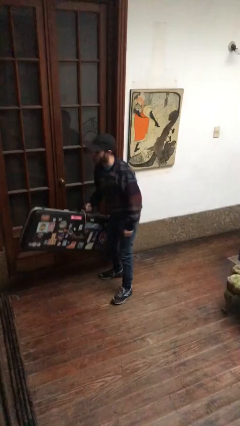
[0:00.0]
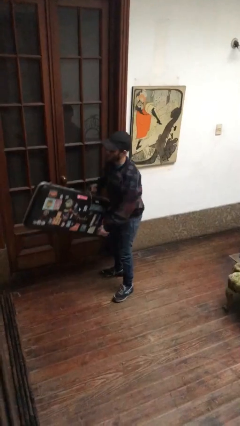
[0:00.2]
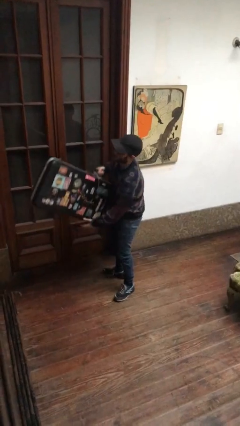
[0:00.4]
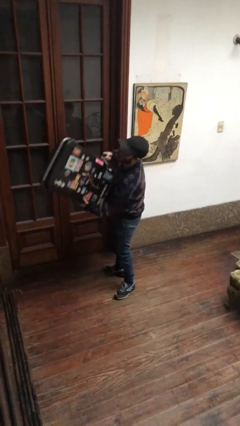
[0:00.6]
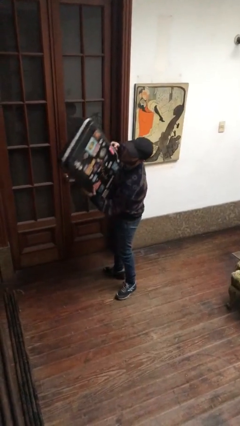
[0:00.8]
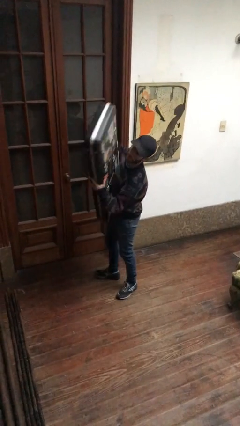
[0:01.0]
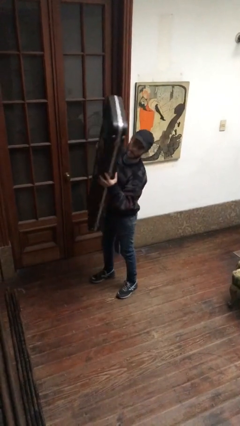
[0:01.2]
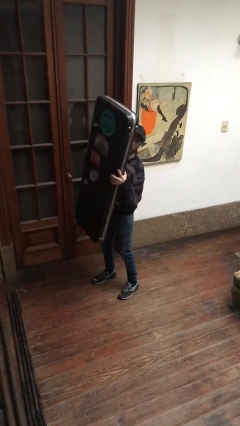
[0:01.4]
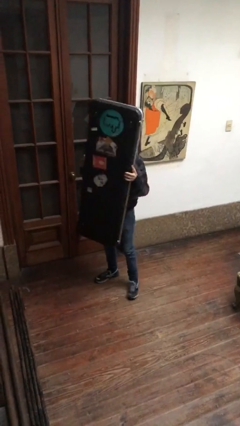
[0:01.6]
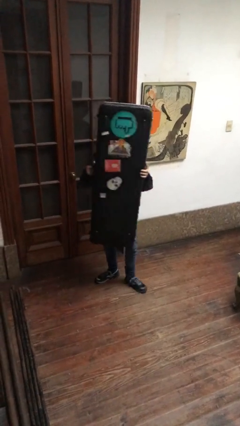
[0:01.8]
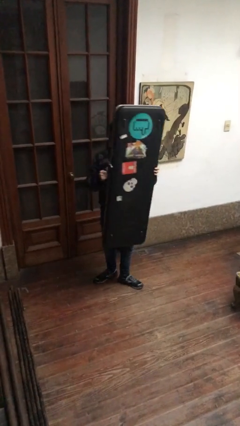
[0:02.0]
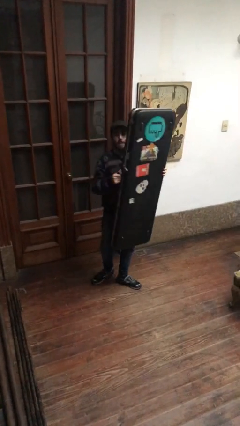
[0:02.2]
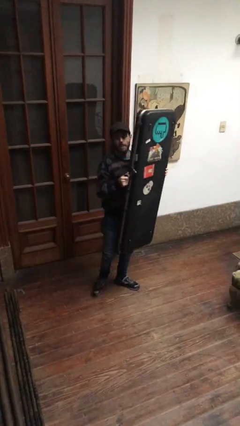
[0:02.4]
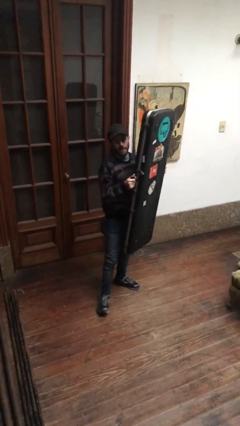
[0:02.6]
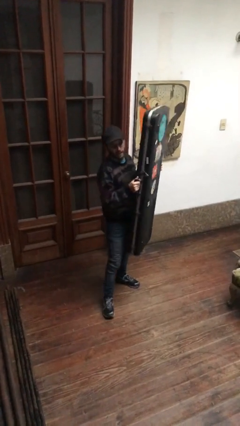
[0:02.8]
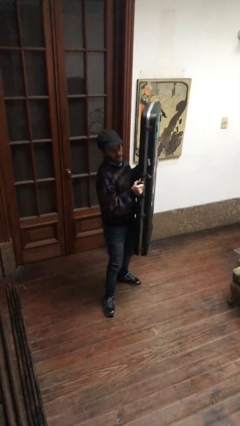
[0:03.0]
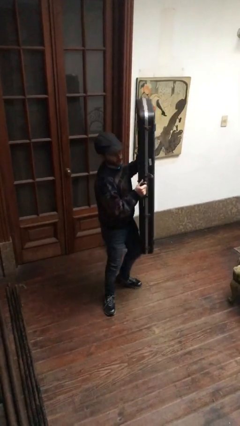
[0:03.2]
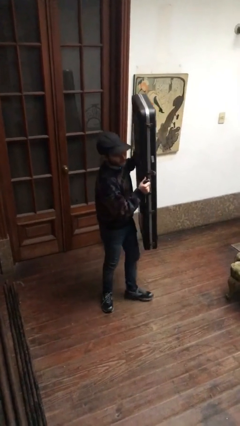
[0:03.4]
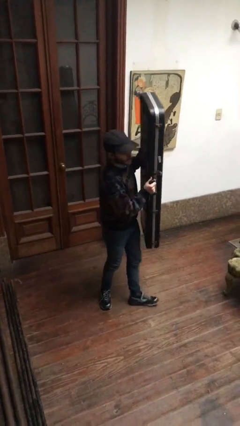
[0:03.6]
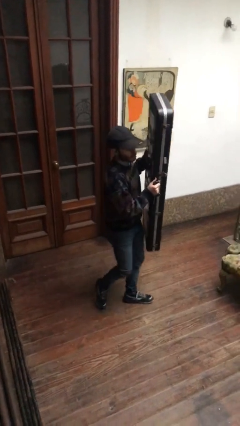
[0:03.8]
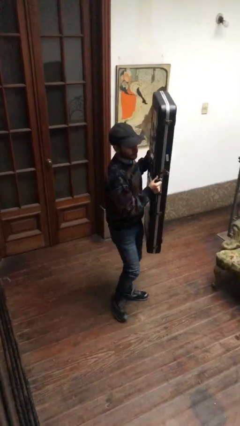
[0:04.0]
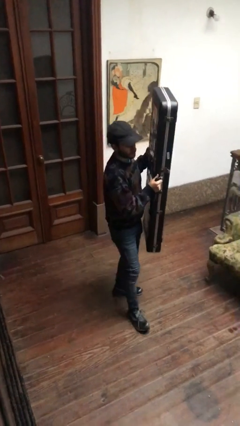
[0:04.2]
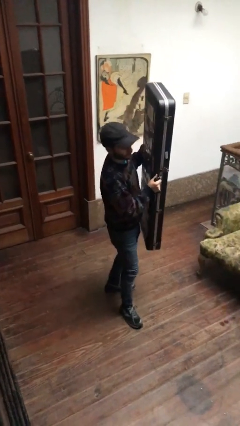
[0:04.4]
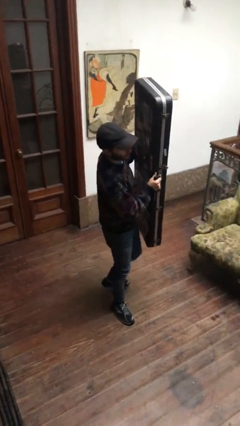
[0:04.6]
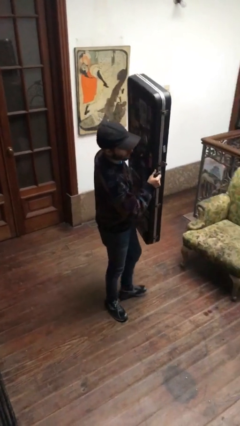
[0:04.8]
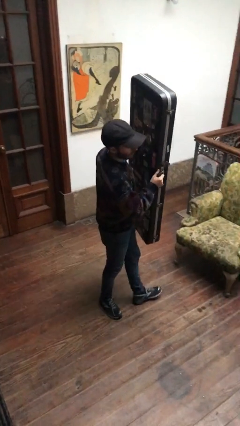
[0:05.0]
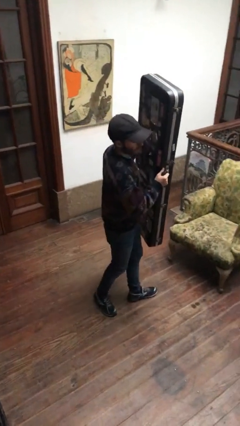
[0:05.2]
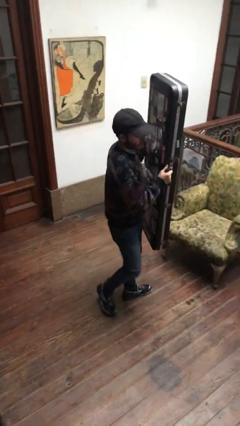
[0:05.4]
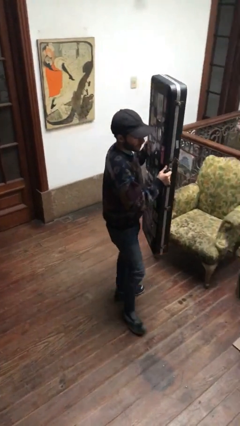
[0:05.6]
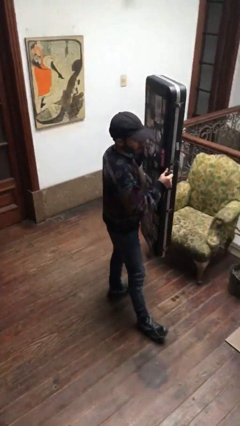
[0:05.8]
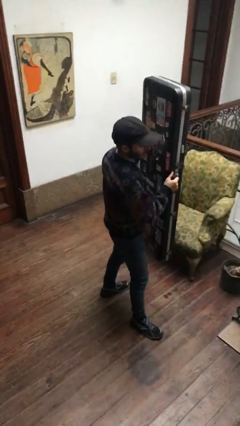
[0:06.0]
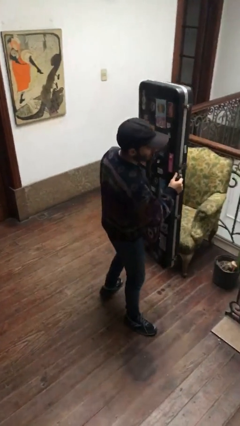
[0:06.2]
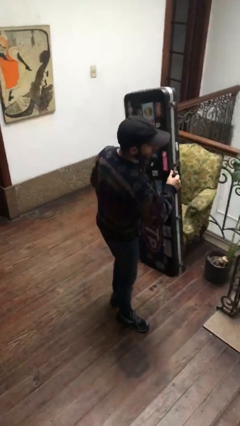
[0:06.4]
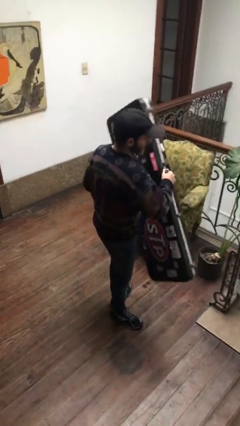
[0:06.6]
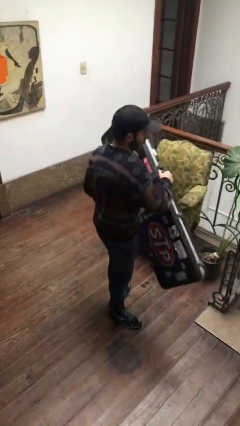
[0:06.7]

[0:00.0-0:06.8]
person carries heavy object

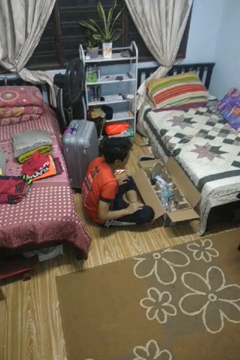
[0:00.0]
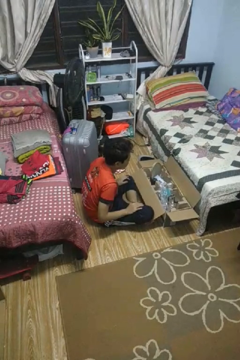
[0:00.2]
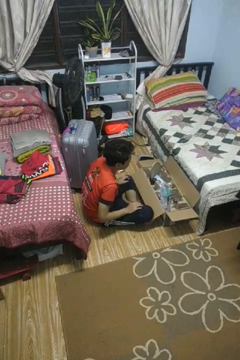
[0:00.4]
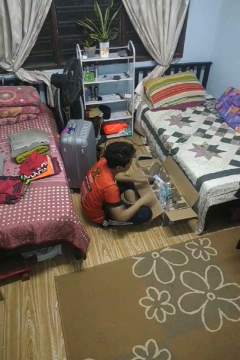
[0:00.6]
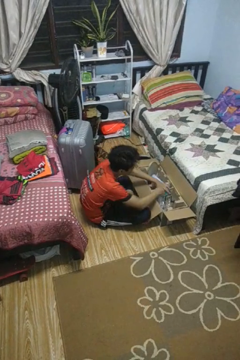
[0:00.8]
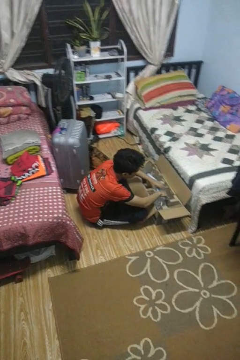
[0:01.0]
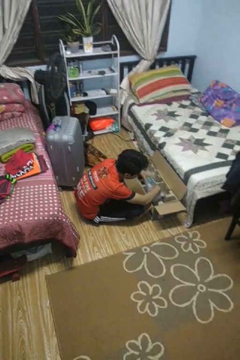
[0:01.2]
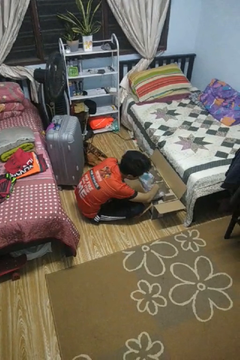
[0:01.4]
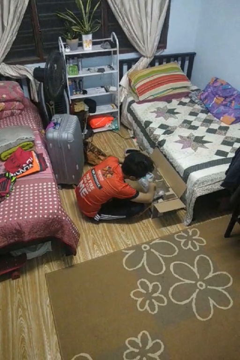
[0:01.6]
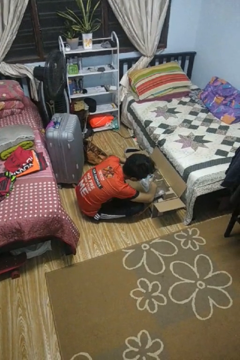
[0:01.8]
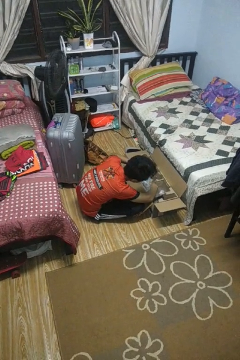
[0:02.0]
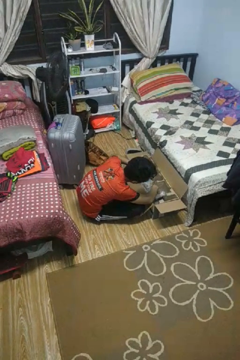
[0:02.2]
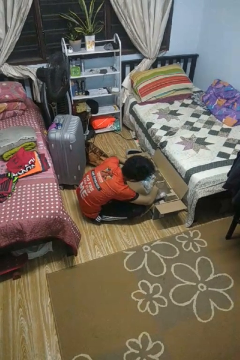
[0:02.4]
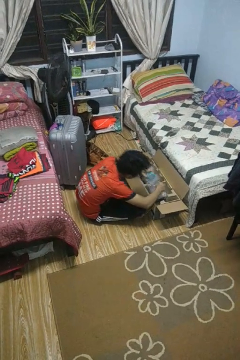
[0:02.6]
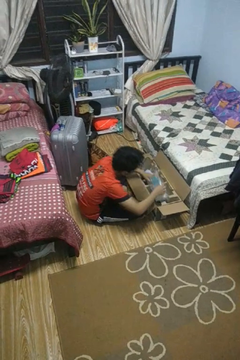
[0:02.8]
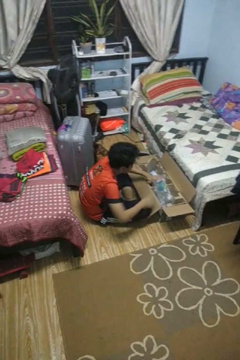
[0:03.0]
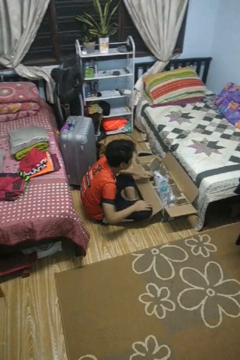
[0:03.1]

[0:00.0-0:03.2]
person searches in box

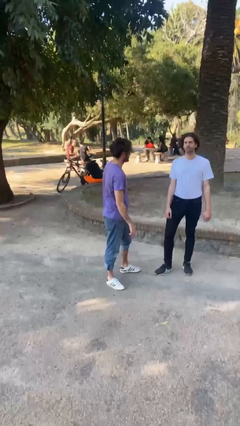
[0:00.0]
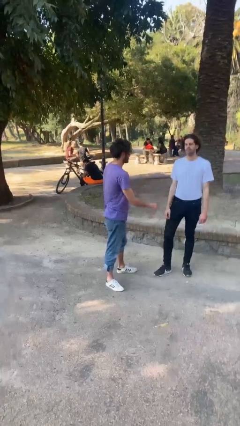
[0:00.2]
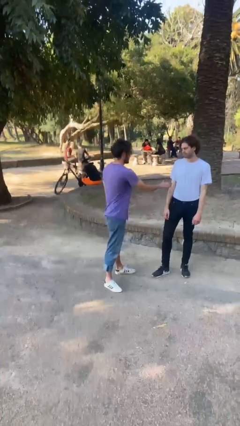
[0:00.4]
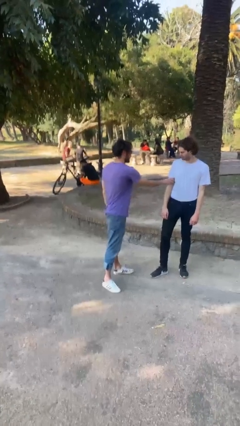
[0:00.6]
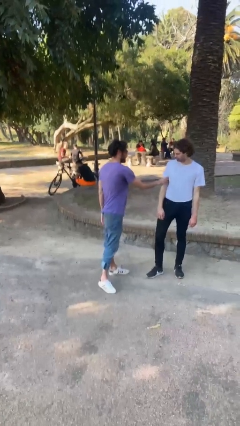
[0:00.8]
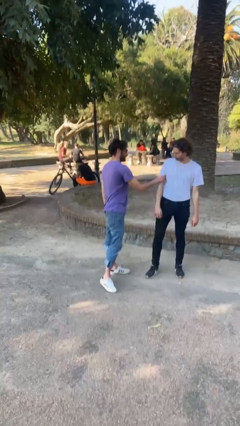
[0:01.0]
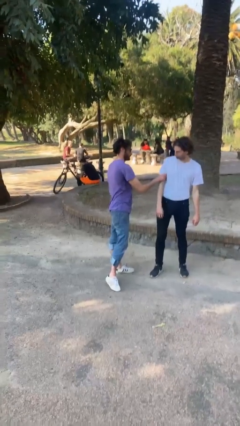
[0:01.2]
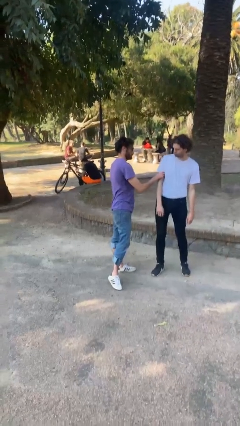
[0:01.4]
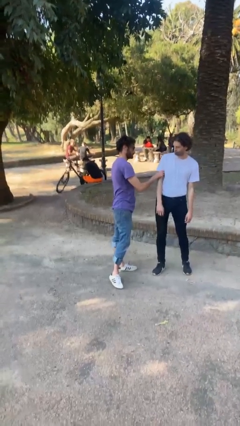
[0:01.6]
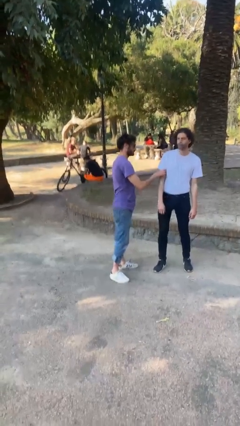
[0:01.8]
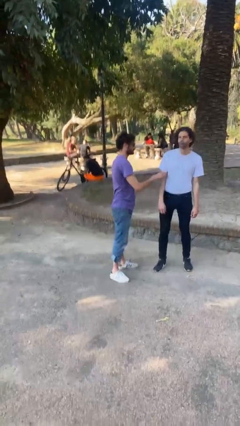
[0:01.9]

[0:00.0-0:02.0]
person grabs person by bicep

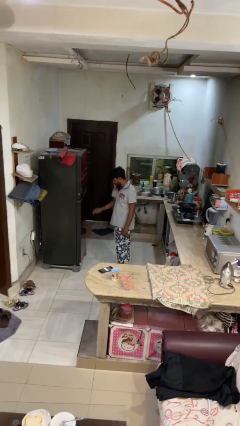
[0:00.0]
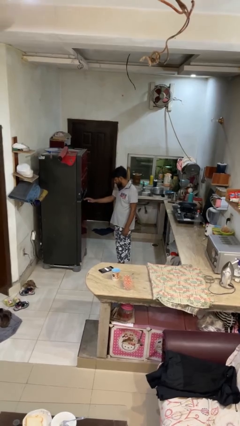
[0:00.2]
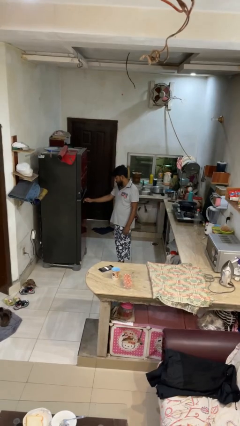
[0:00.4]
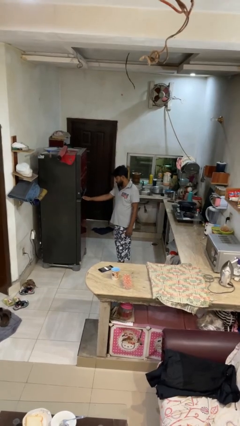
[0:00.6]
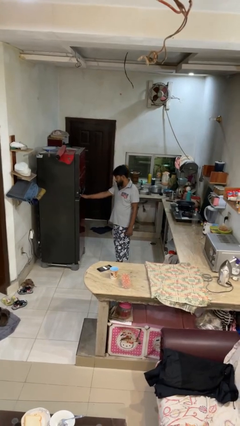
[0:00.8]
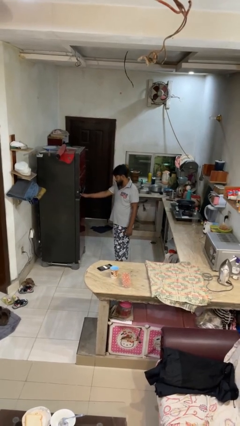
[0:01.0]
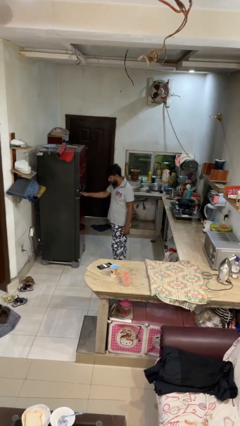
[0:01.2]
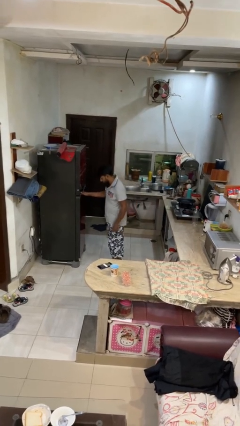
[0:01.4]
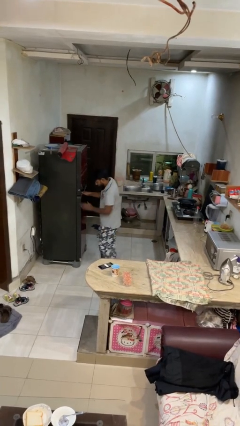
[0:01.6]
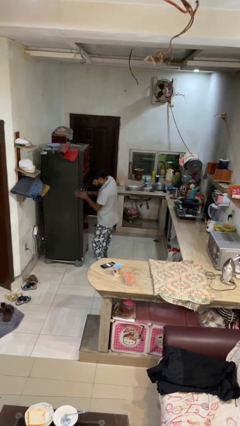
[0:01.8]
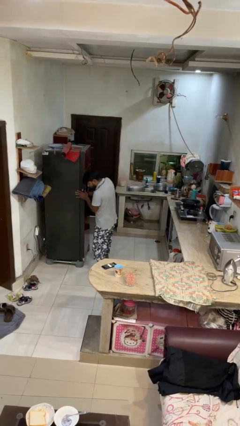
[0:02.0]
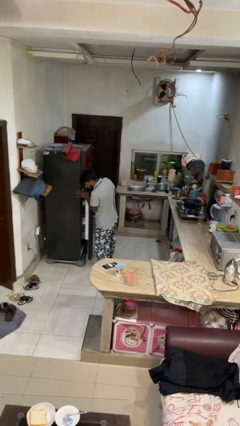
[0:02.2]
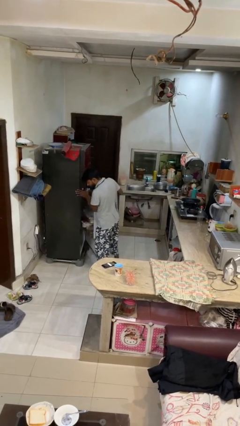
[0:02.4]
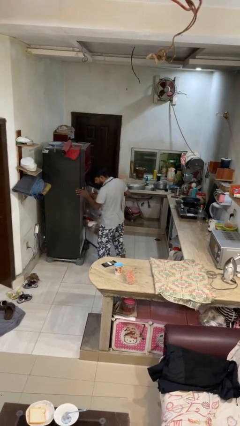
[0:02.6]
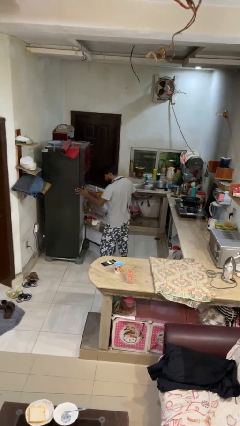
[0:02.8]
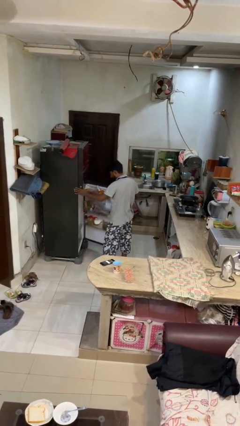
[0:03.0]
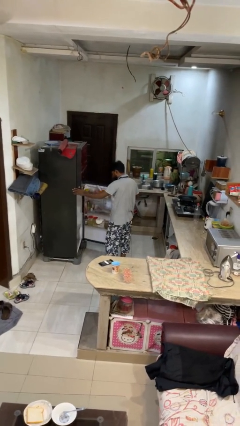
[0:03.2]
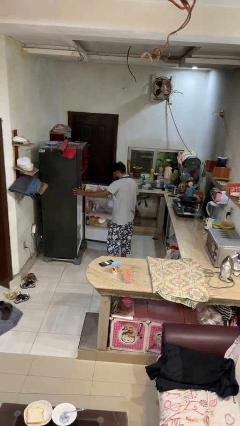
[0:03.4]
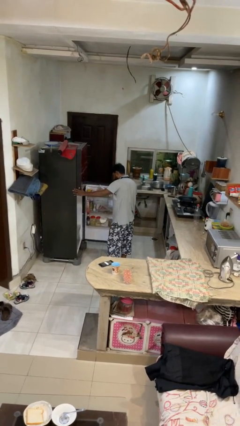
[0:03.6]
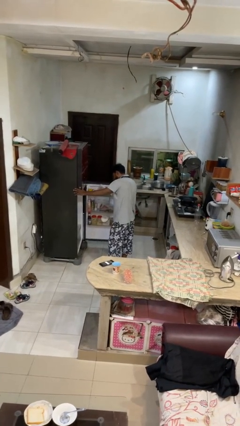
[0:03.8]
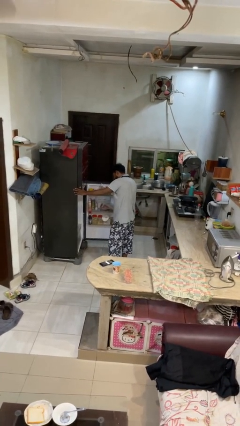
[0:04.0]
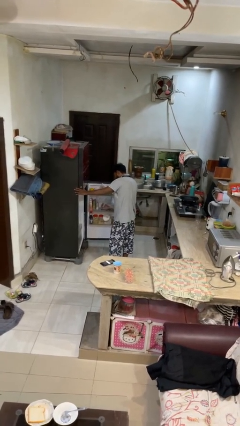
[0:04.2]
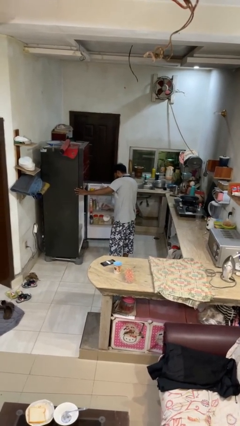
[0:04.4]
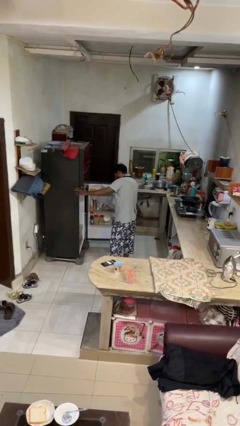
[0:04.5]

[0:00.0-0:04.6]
person opens refrigerator

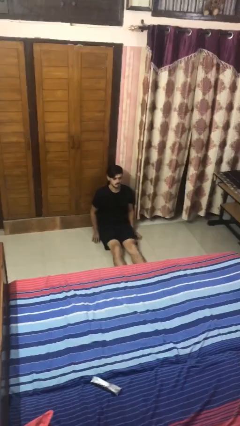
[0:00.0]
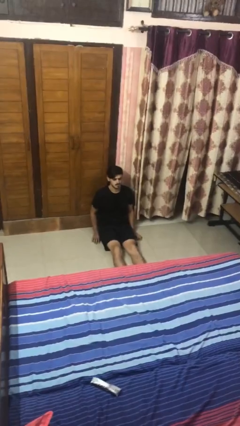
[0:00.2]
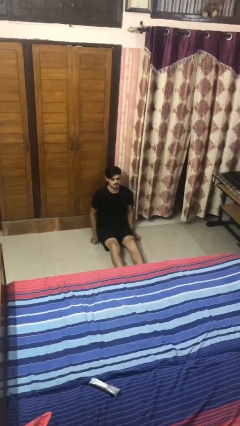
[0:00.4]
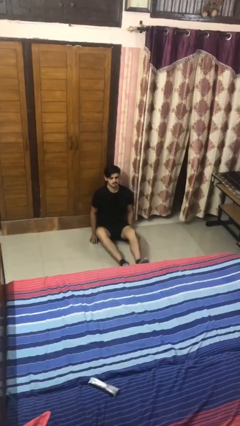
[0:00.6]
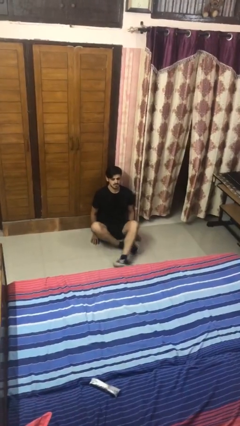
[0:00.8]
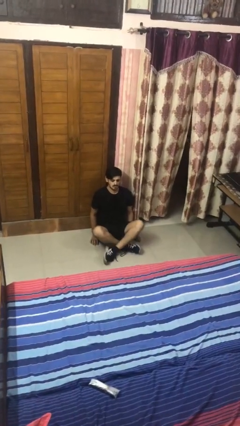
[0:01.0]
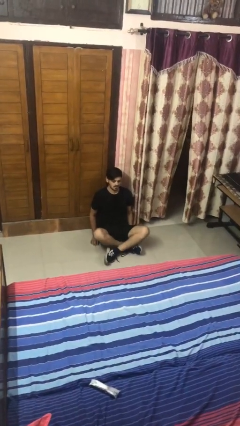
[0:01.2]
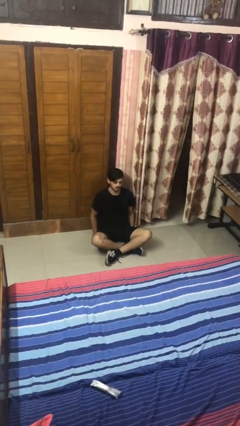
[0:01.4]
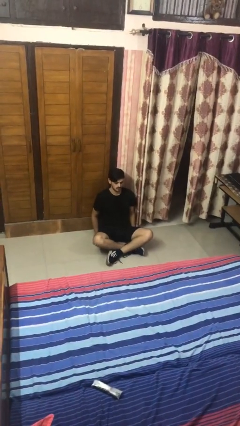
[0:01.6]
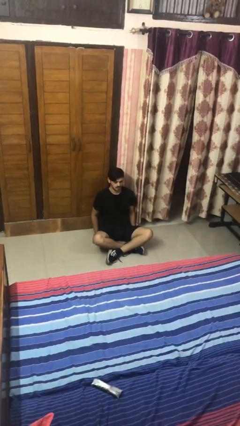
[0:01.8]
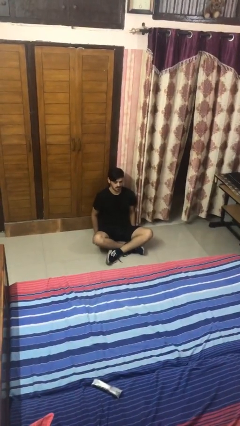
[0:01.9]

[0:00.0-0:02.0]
person crosses legs
